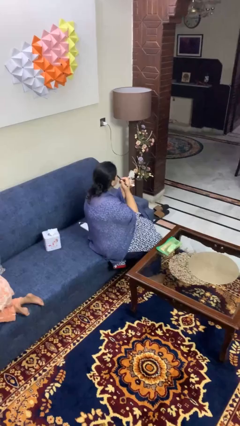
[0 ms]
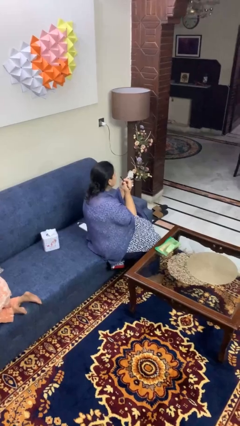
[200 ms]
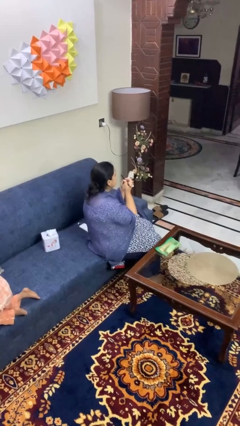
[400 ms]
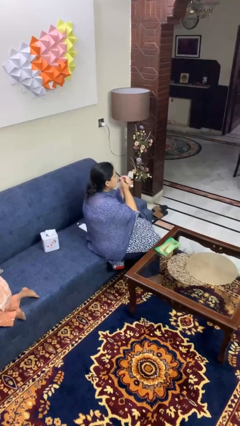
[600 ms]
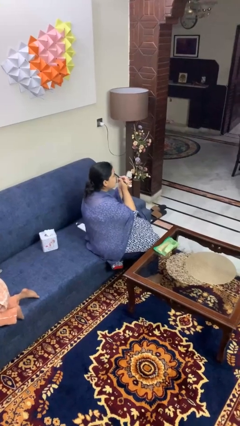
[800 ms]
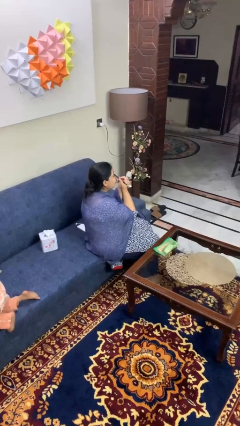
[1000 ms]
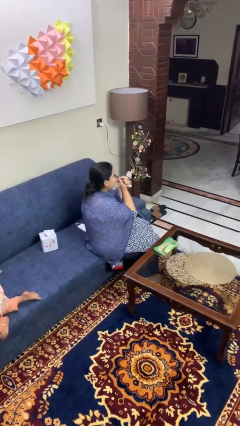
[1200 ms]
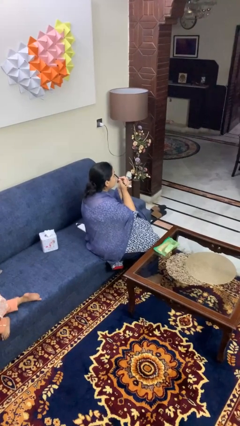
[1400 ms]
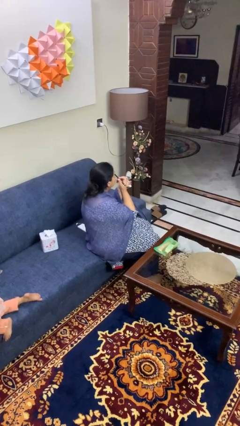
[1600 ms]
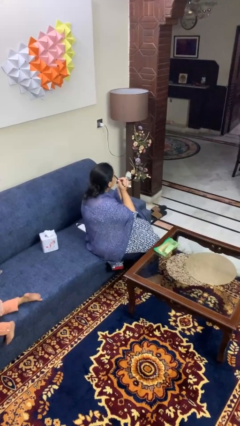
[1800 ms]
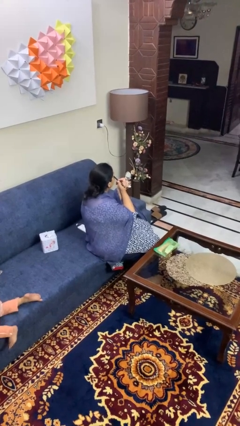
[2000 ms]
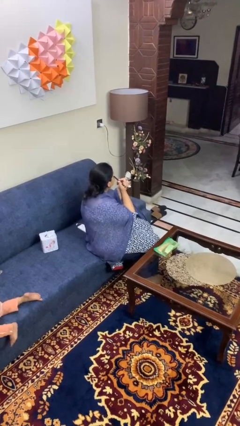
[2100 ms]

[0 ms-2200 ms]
person applies eye makeup

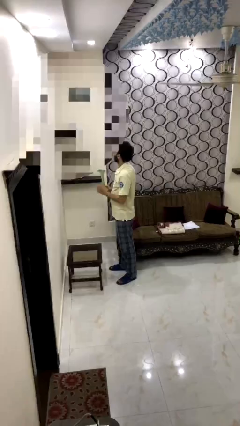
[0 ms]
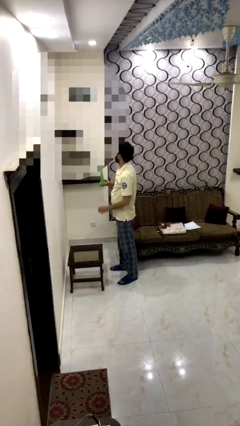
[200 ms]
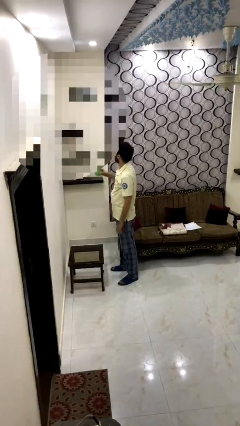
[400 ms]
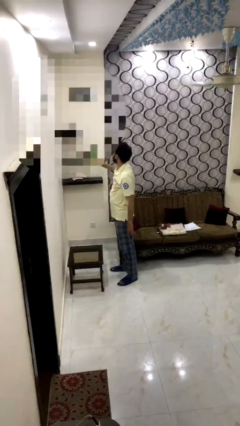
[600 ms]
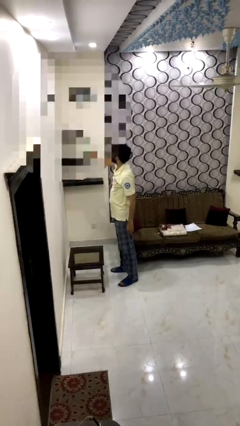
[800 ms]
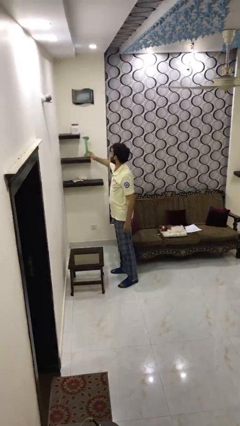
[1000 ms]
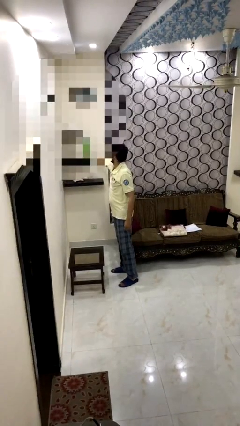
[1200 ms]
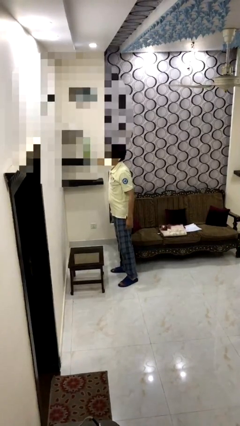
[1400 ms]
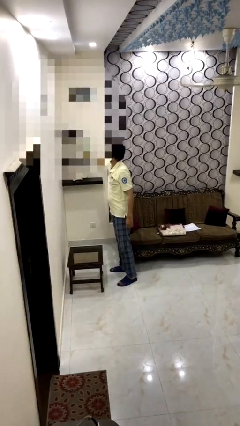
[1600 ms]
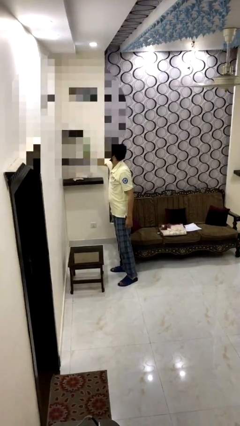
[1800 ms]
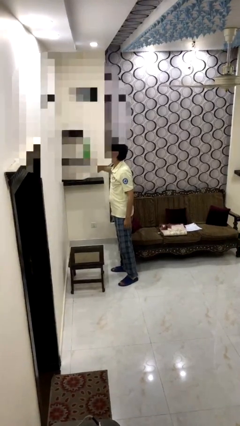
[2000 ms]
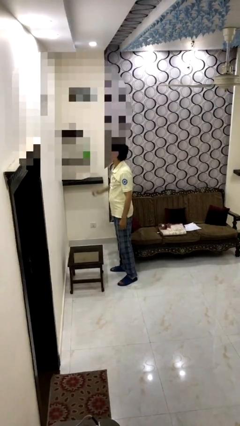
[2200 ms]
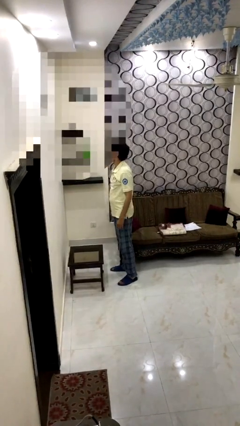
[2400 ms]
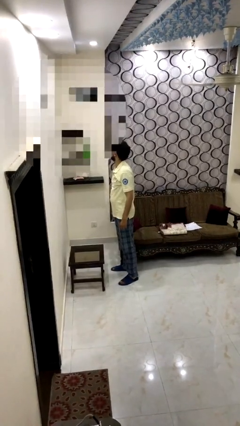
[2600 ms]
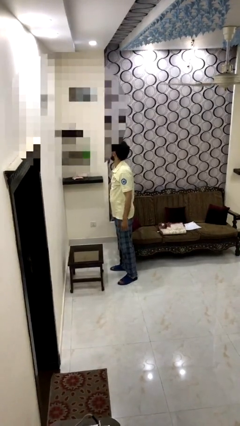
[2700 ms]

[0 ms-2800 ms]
person puts down object on shelf

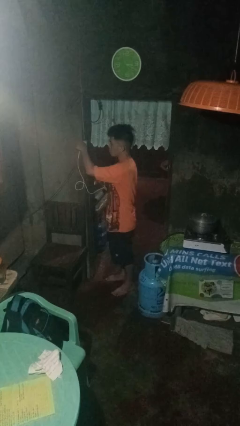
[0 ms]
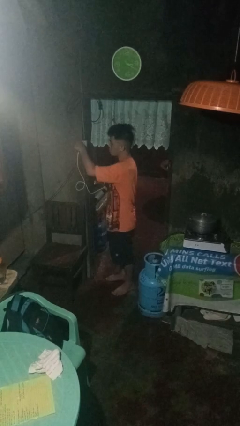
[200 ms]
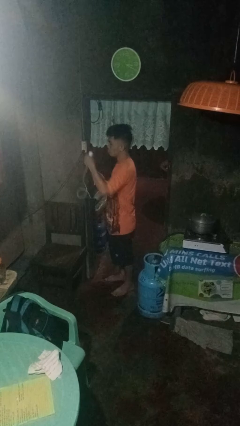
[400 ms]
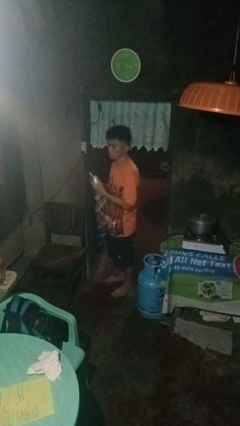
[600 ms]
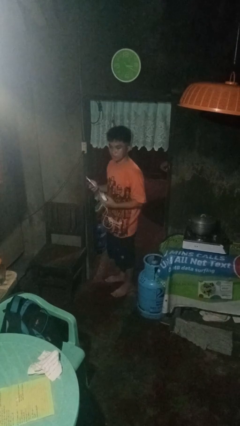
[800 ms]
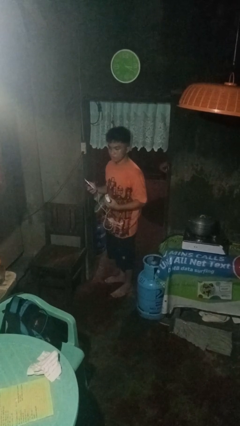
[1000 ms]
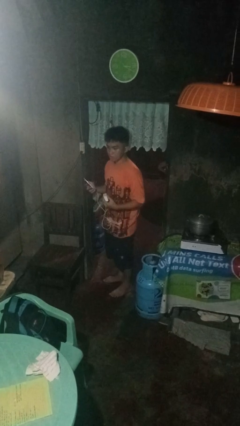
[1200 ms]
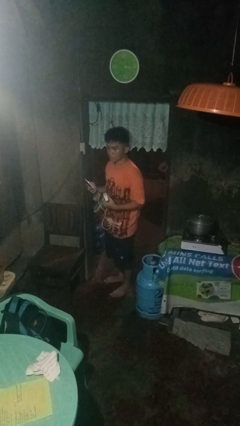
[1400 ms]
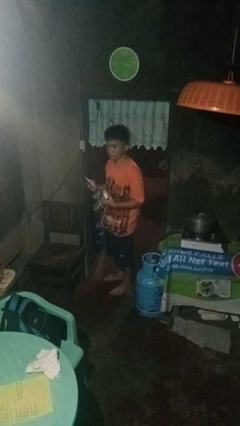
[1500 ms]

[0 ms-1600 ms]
person unplugs from electrical socket

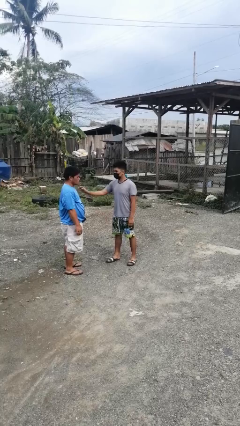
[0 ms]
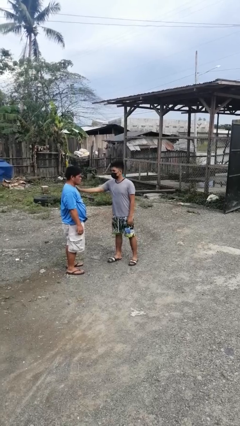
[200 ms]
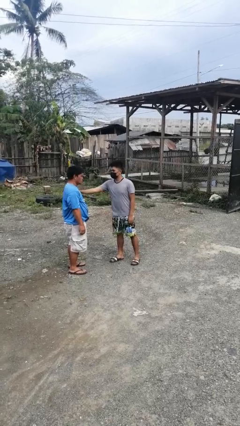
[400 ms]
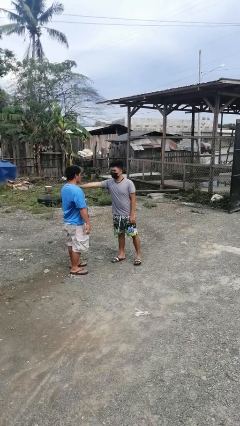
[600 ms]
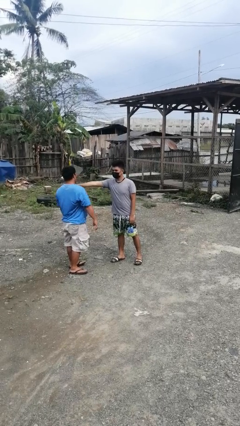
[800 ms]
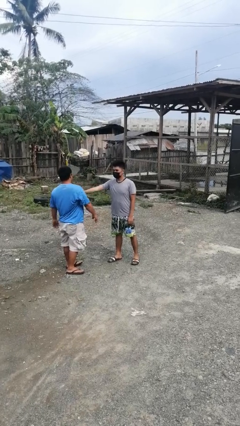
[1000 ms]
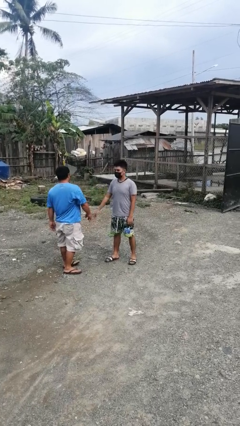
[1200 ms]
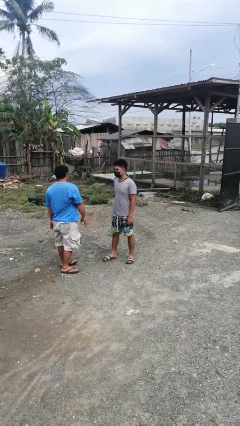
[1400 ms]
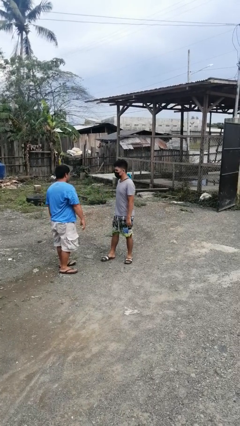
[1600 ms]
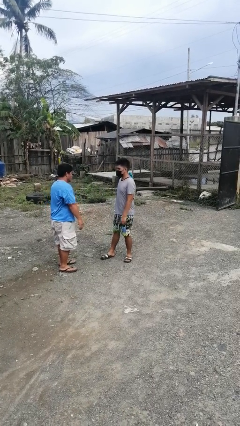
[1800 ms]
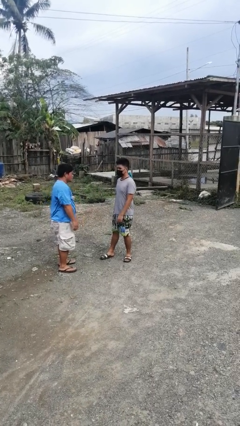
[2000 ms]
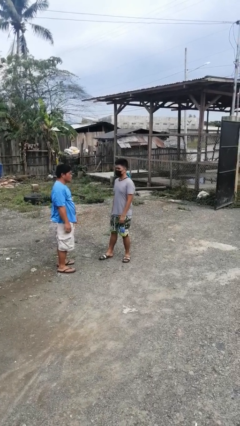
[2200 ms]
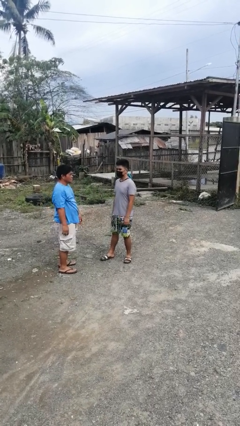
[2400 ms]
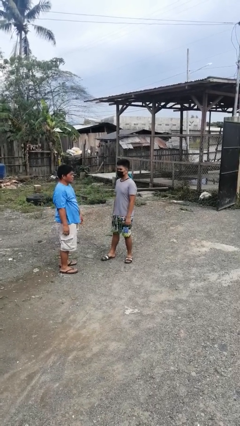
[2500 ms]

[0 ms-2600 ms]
person shoves person

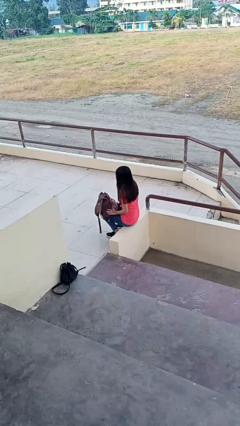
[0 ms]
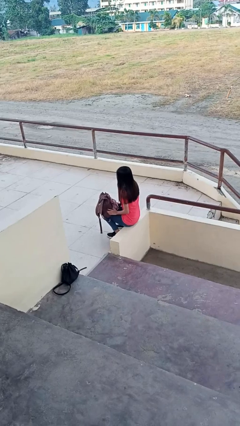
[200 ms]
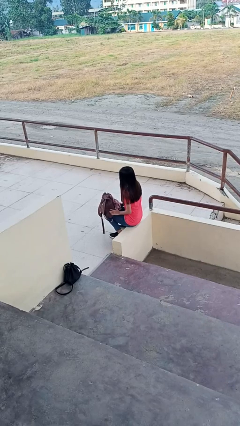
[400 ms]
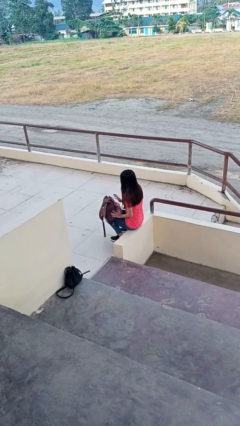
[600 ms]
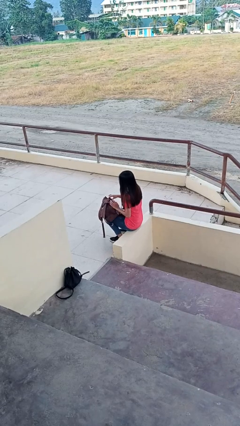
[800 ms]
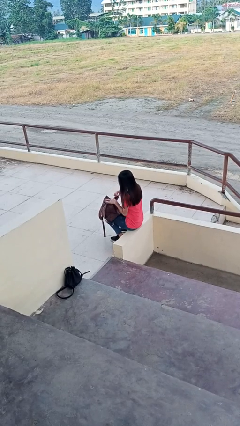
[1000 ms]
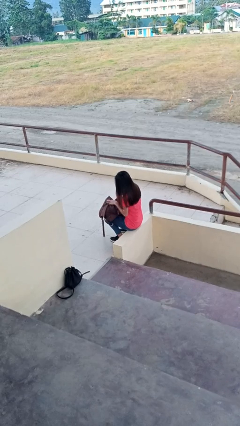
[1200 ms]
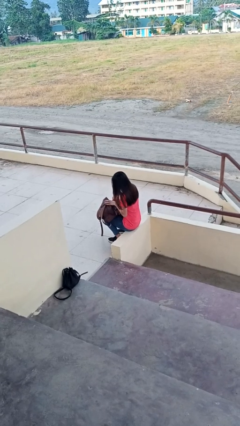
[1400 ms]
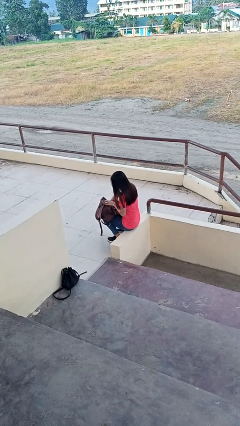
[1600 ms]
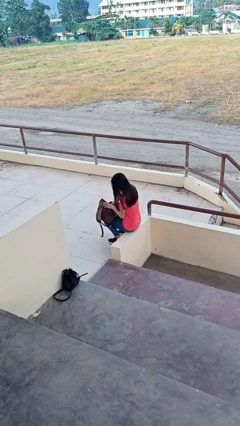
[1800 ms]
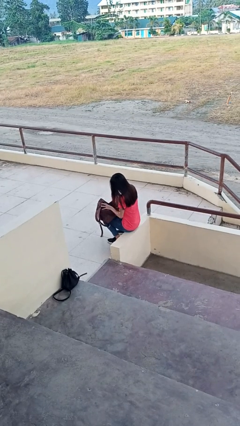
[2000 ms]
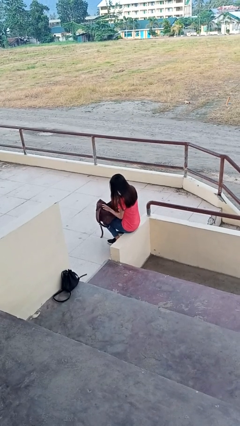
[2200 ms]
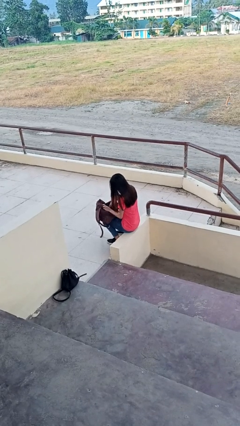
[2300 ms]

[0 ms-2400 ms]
person searches in backpack

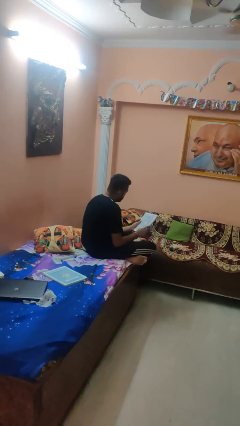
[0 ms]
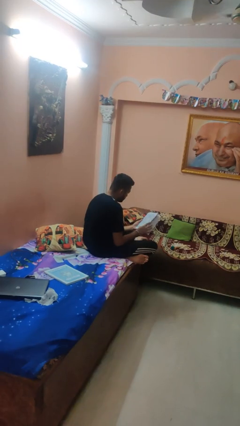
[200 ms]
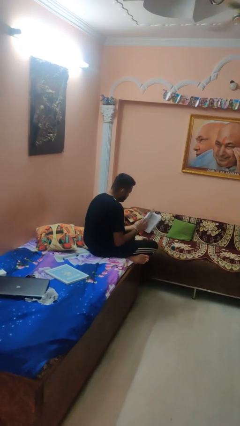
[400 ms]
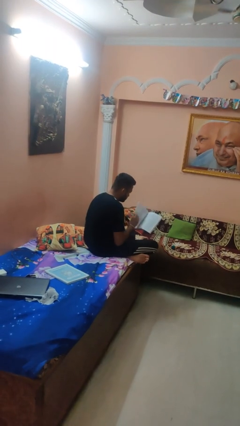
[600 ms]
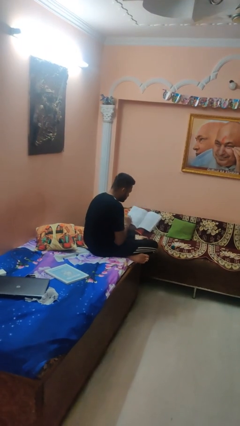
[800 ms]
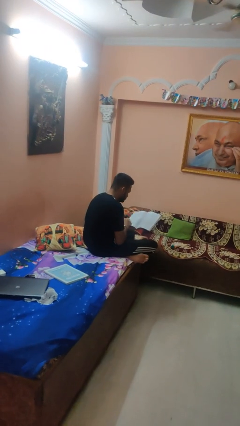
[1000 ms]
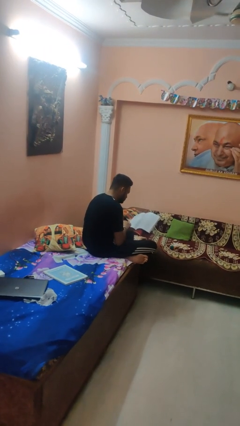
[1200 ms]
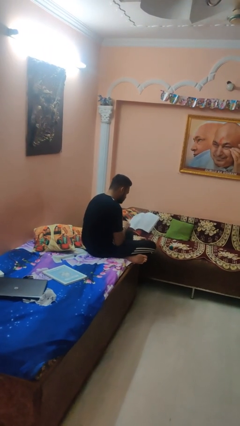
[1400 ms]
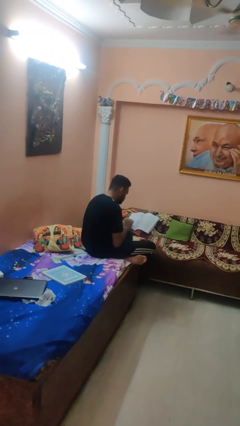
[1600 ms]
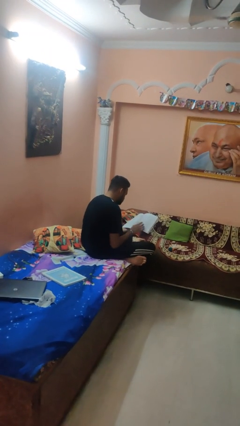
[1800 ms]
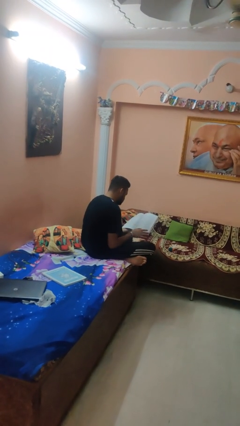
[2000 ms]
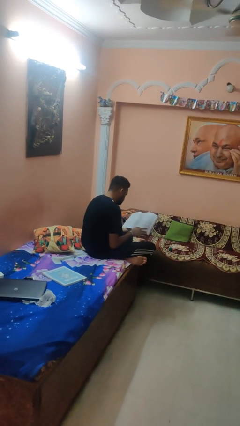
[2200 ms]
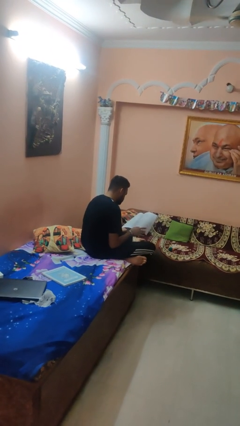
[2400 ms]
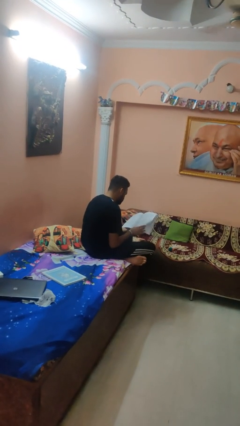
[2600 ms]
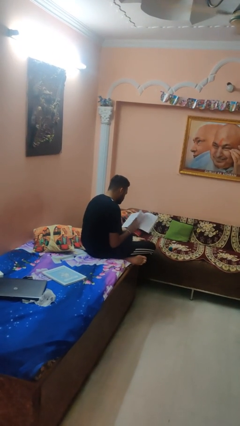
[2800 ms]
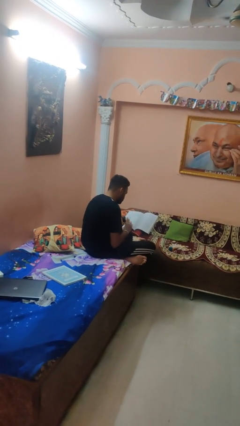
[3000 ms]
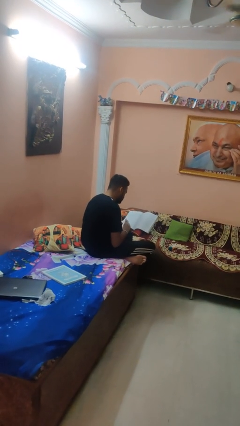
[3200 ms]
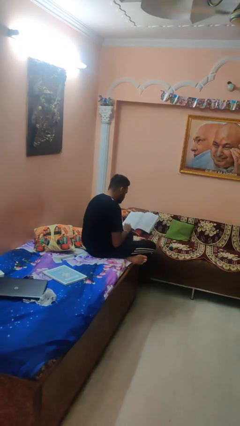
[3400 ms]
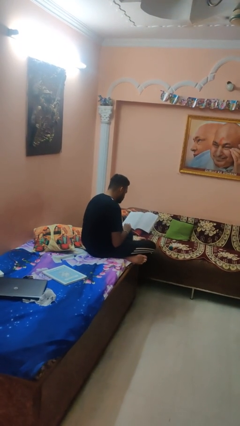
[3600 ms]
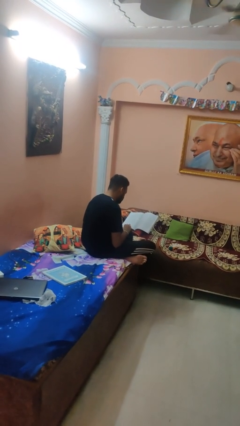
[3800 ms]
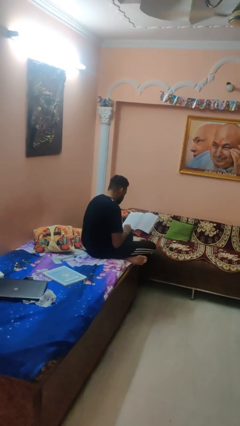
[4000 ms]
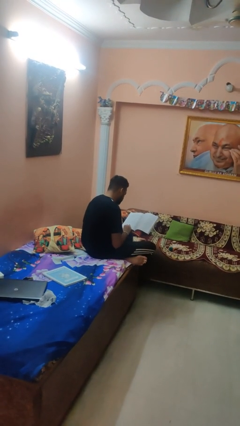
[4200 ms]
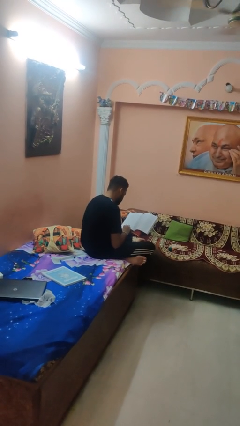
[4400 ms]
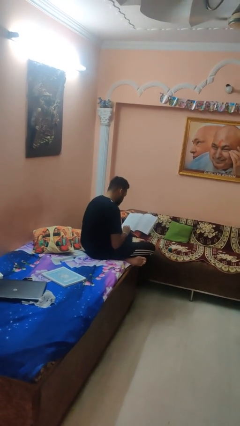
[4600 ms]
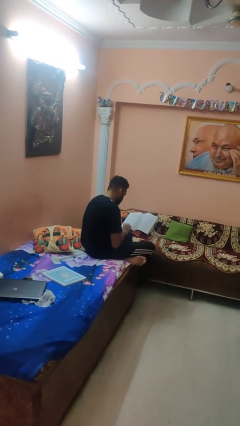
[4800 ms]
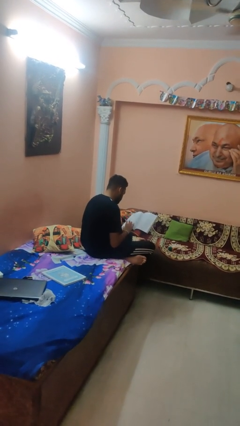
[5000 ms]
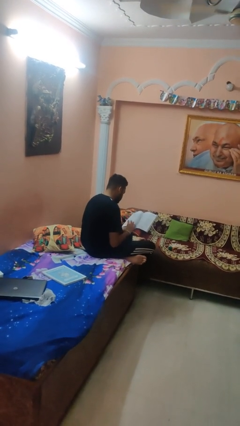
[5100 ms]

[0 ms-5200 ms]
person reads magazine

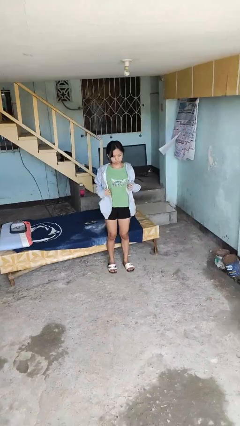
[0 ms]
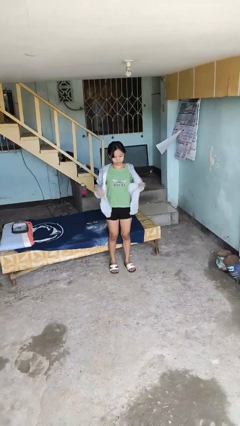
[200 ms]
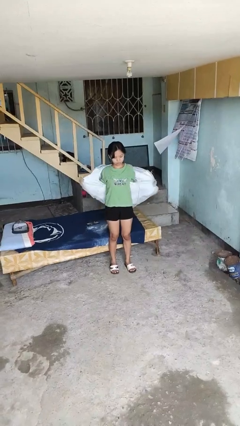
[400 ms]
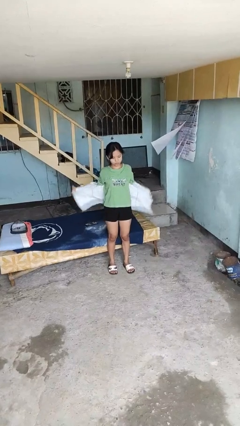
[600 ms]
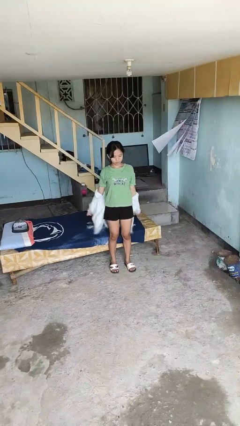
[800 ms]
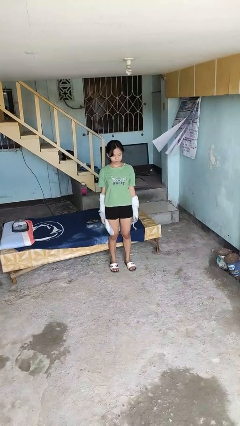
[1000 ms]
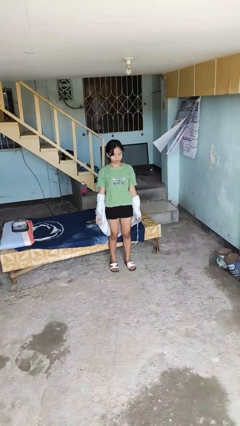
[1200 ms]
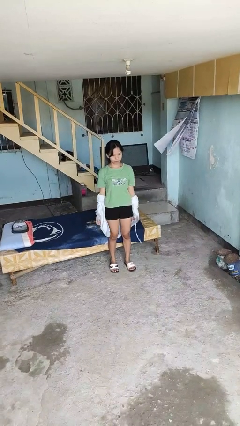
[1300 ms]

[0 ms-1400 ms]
person takes off jacket
